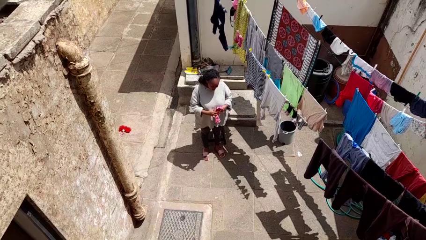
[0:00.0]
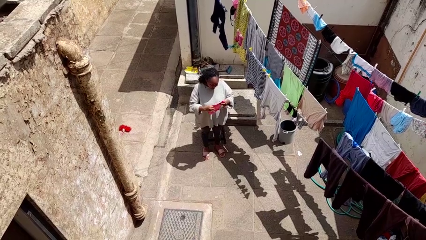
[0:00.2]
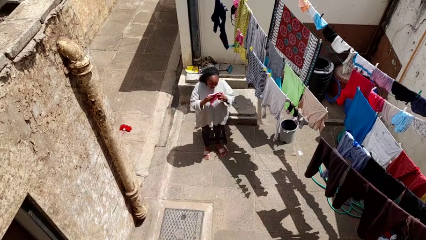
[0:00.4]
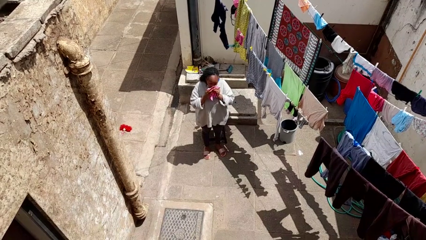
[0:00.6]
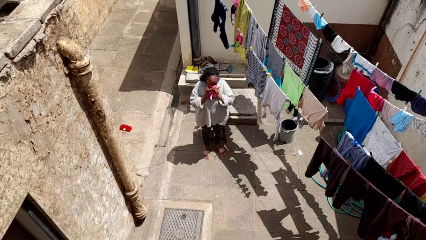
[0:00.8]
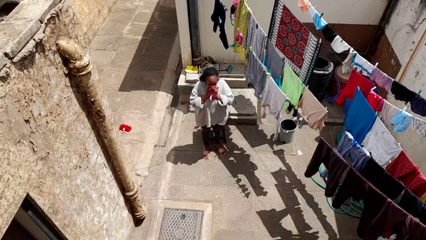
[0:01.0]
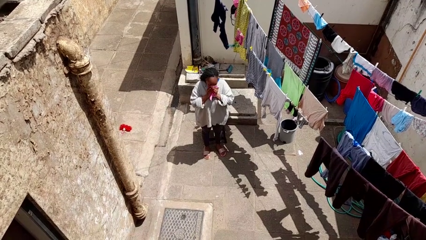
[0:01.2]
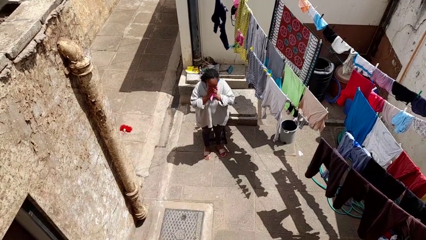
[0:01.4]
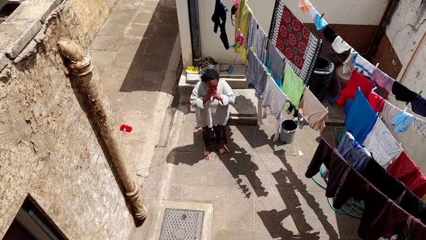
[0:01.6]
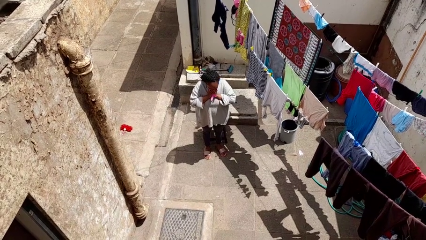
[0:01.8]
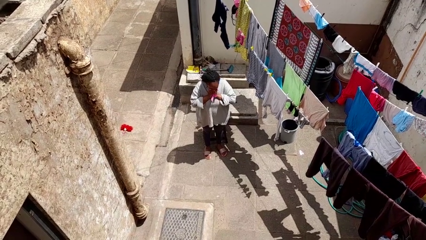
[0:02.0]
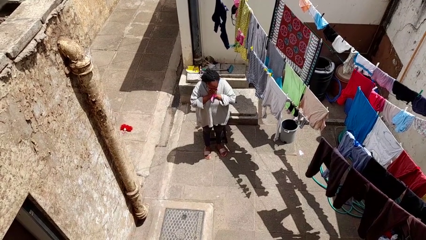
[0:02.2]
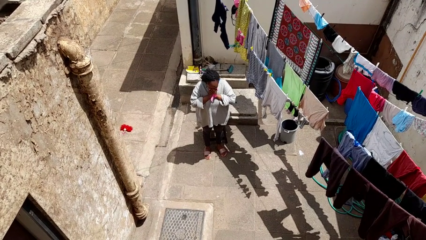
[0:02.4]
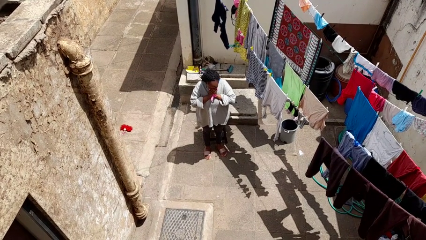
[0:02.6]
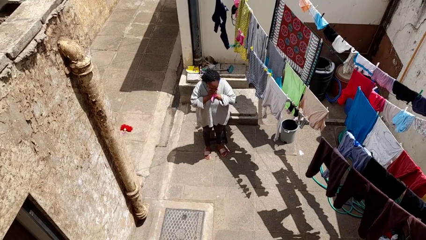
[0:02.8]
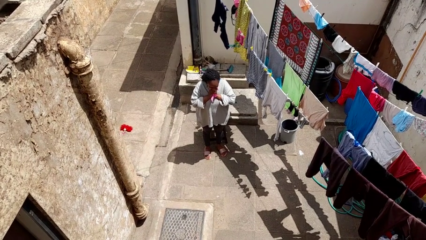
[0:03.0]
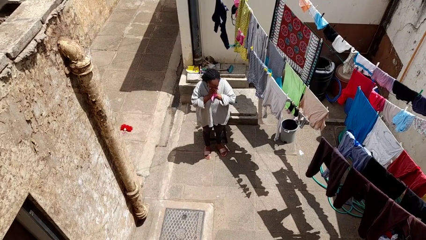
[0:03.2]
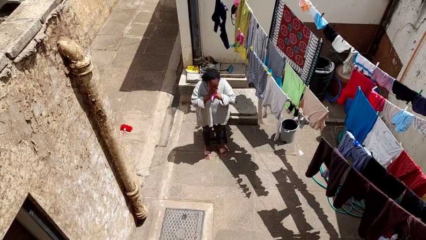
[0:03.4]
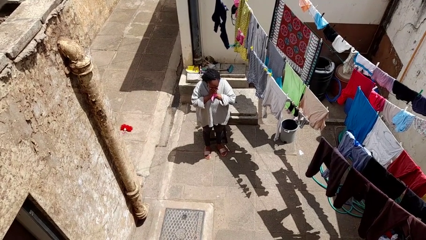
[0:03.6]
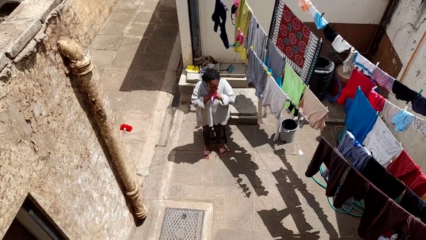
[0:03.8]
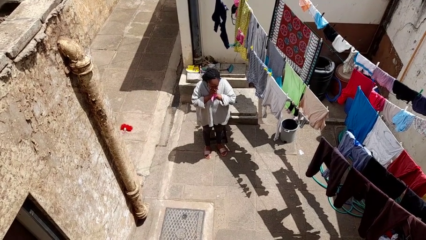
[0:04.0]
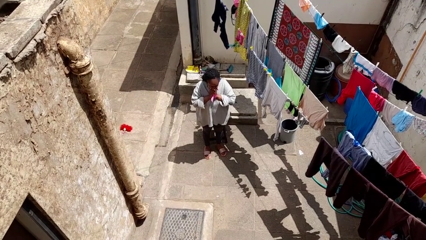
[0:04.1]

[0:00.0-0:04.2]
person blows nose

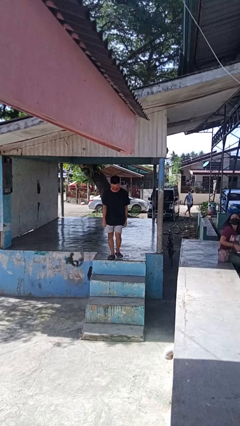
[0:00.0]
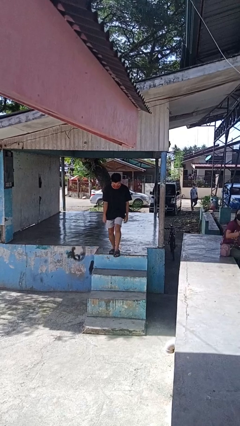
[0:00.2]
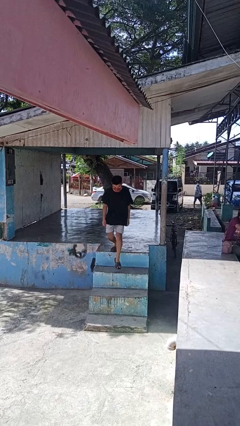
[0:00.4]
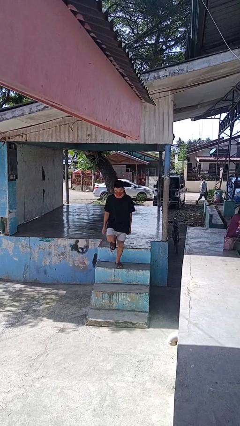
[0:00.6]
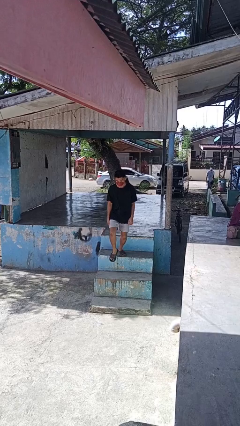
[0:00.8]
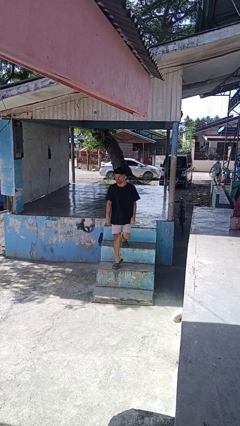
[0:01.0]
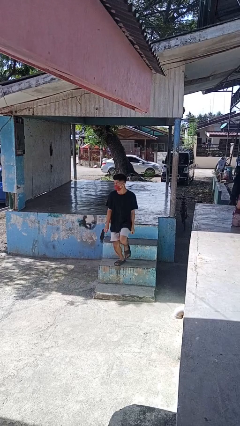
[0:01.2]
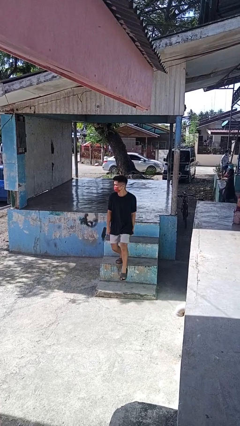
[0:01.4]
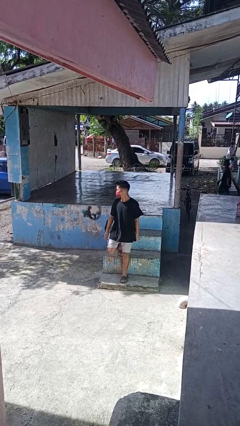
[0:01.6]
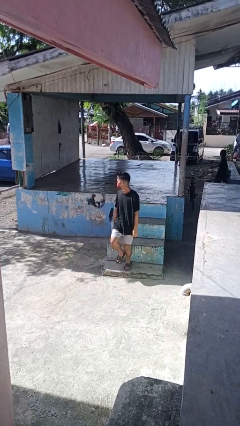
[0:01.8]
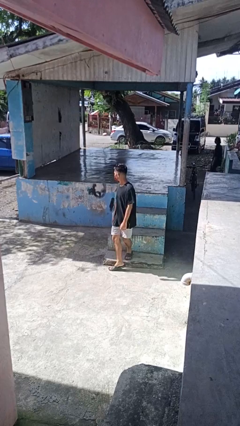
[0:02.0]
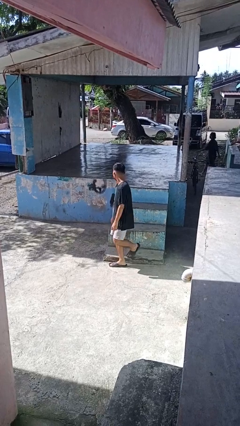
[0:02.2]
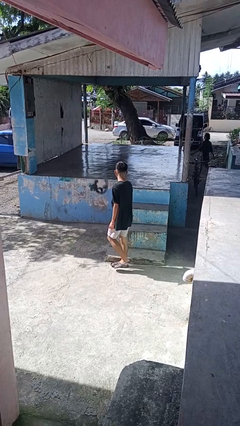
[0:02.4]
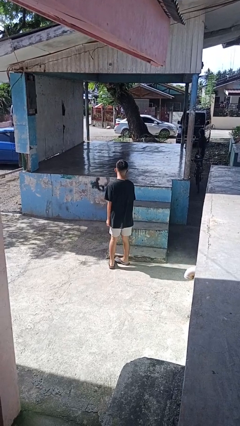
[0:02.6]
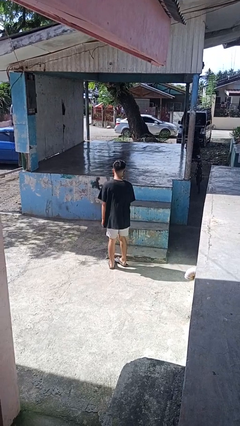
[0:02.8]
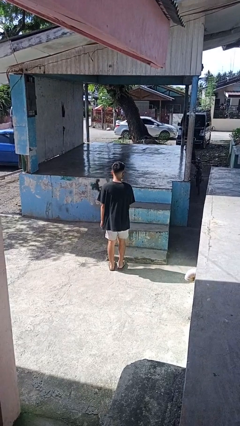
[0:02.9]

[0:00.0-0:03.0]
person climbs down stairs

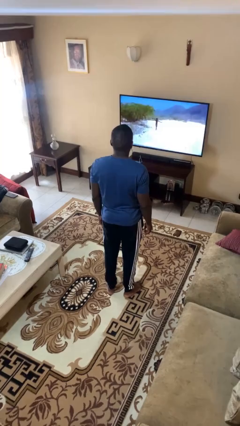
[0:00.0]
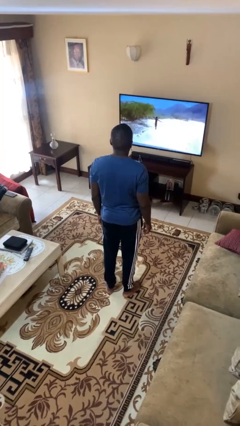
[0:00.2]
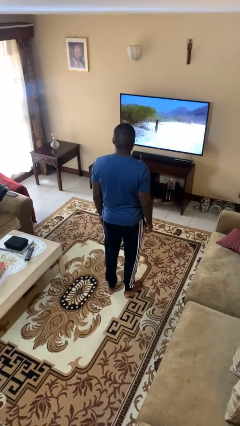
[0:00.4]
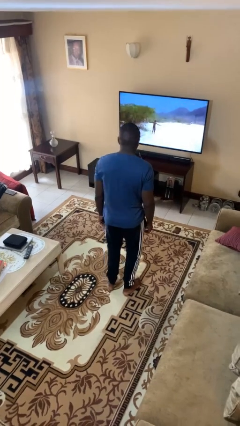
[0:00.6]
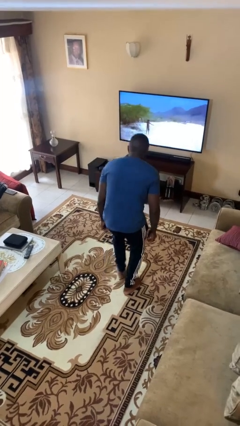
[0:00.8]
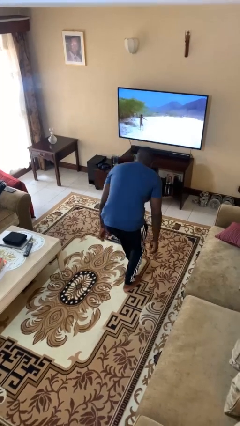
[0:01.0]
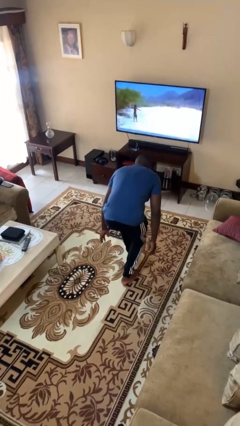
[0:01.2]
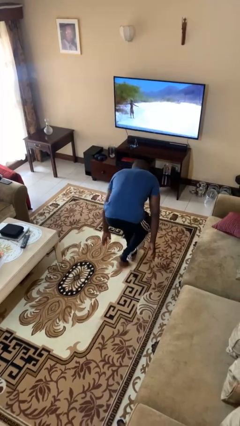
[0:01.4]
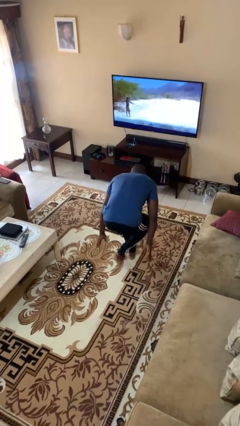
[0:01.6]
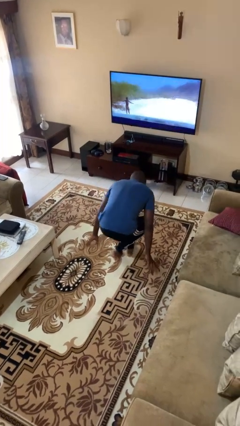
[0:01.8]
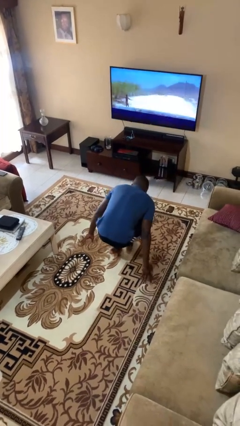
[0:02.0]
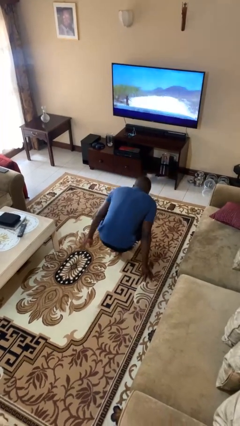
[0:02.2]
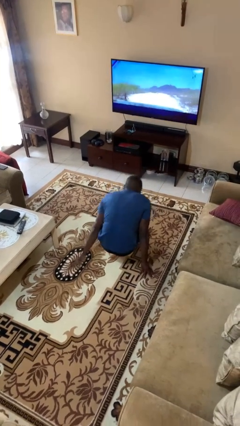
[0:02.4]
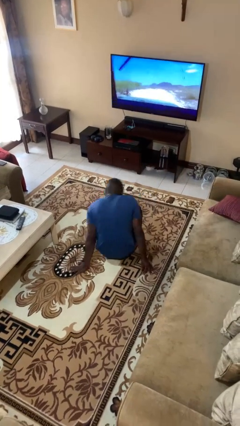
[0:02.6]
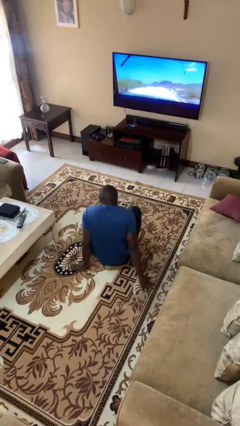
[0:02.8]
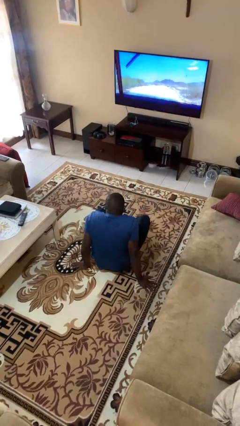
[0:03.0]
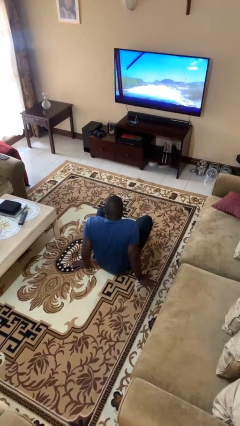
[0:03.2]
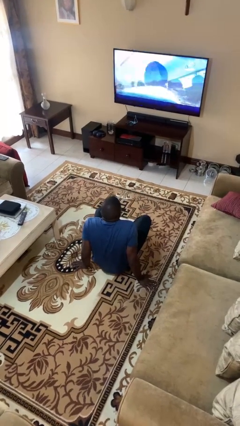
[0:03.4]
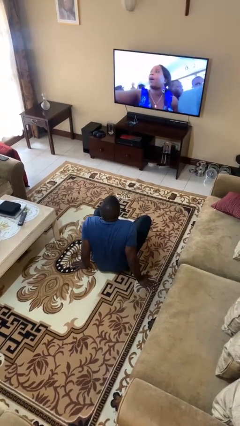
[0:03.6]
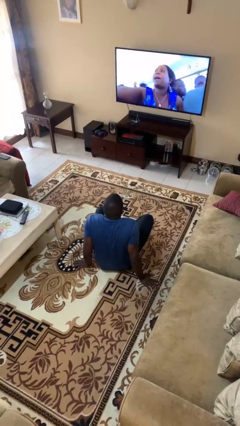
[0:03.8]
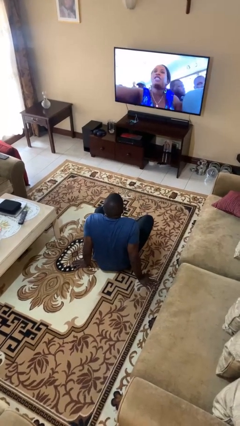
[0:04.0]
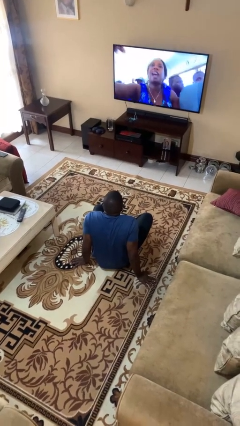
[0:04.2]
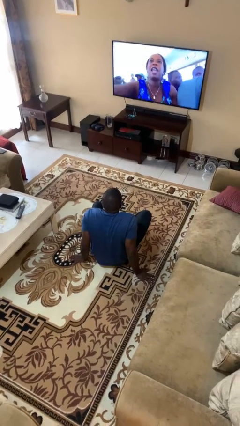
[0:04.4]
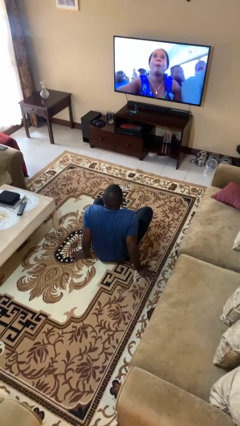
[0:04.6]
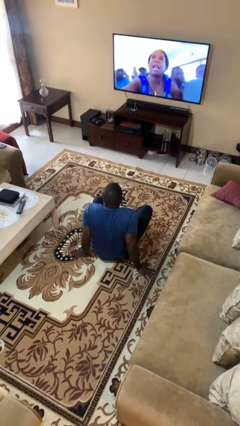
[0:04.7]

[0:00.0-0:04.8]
person sits crisscross

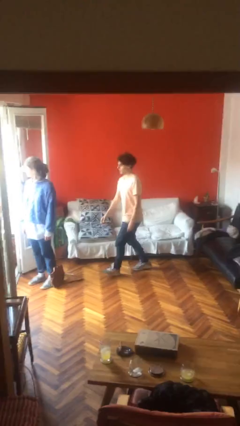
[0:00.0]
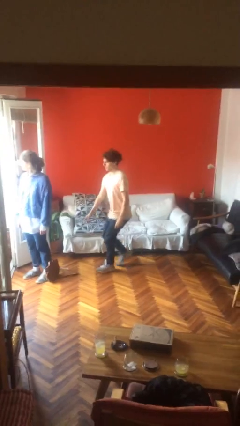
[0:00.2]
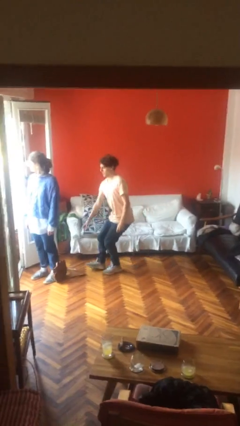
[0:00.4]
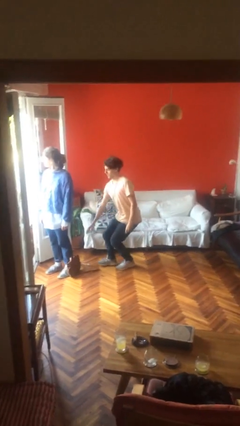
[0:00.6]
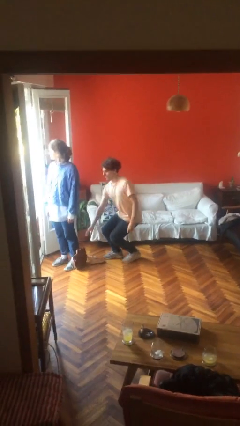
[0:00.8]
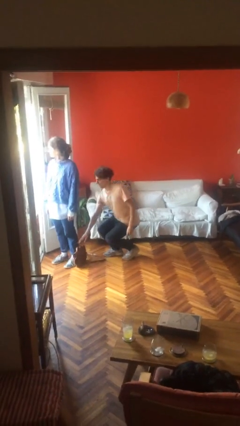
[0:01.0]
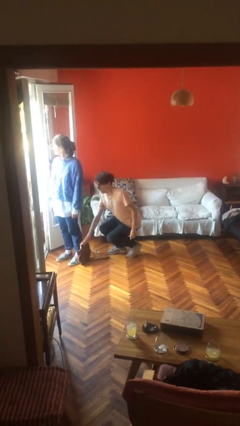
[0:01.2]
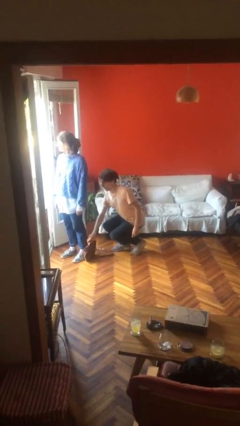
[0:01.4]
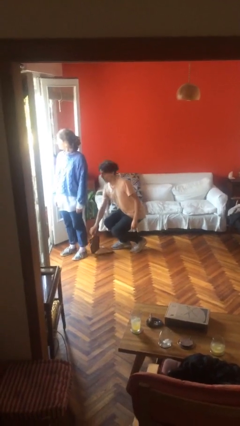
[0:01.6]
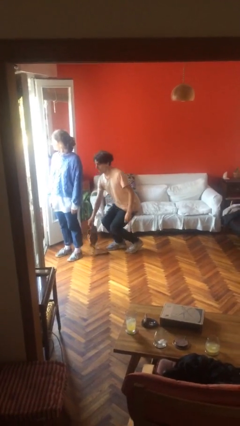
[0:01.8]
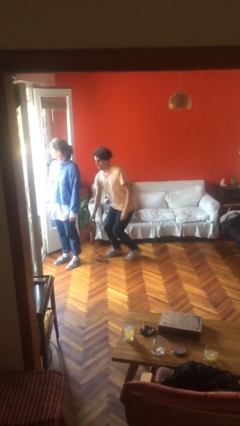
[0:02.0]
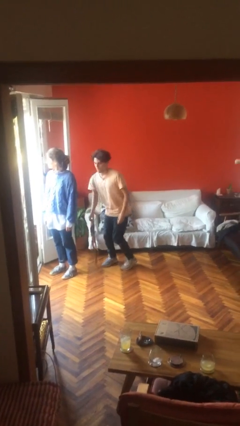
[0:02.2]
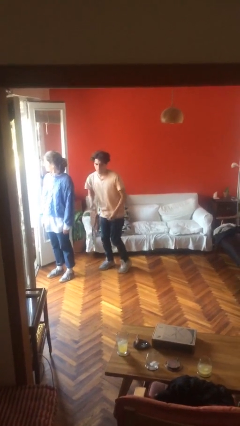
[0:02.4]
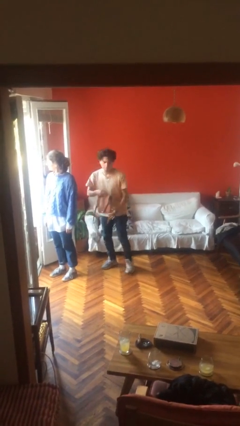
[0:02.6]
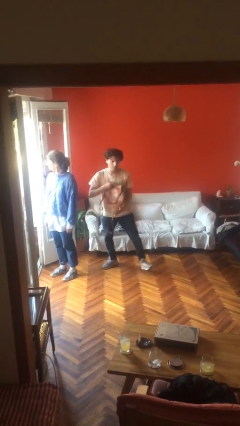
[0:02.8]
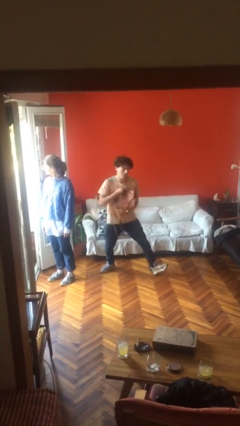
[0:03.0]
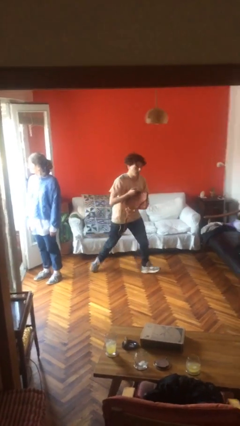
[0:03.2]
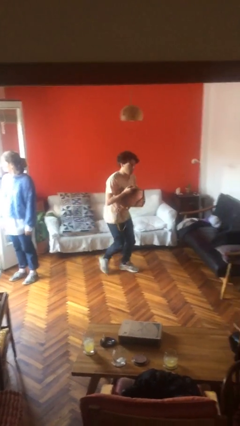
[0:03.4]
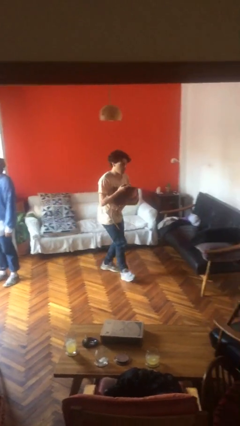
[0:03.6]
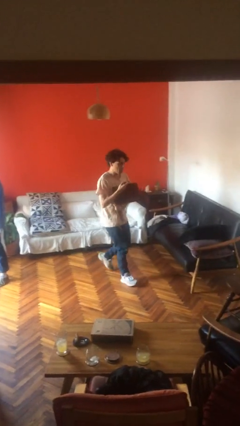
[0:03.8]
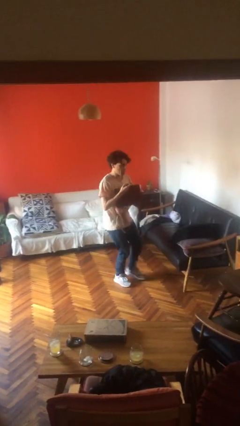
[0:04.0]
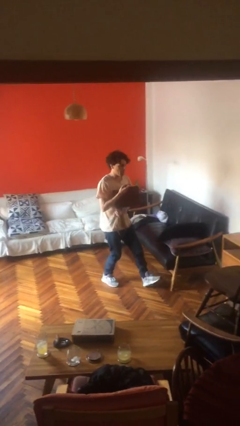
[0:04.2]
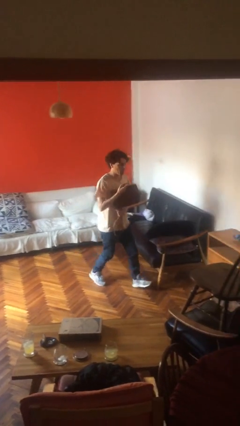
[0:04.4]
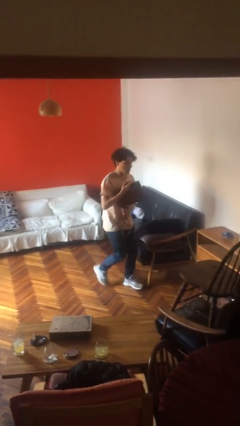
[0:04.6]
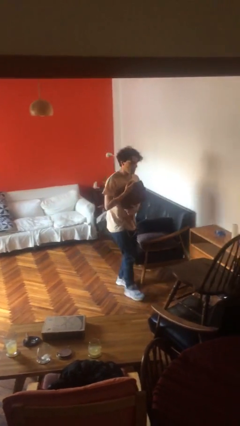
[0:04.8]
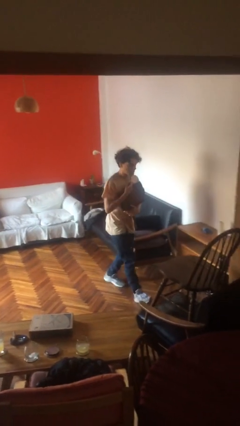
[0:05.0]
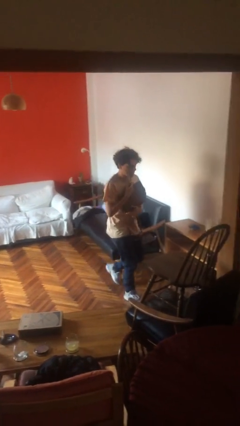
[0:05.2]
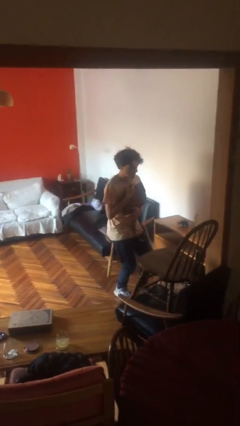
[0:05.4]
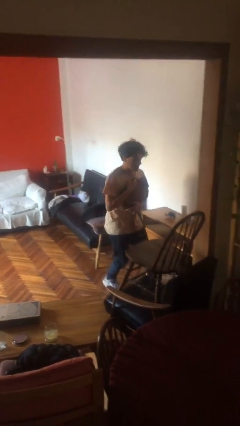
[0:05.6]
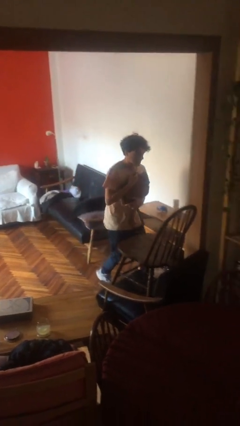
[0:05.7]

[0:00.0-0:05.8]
person steals object from person
